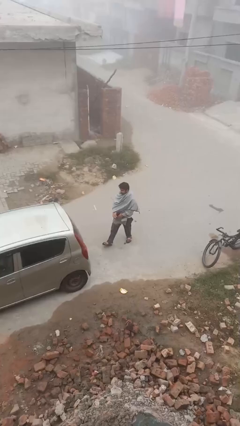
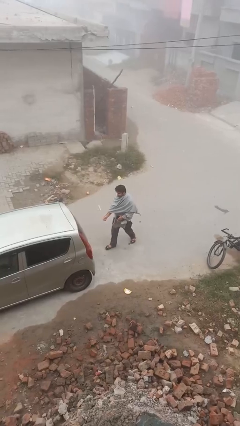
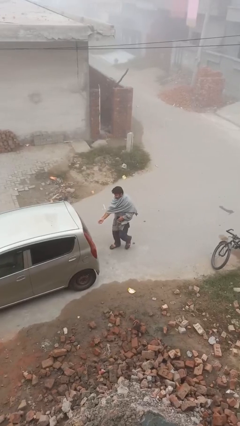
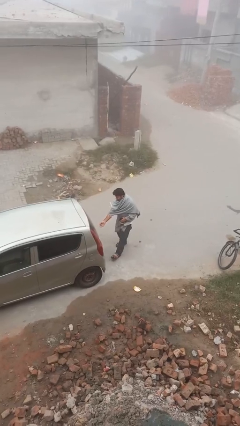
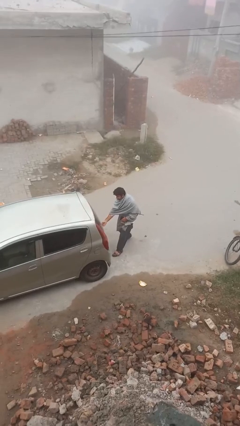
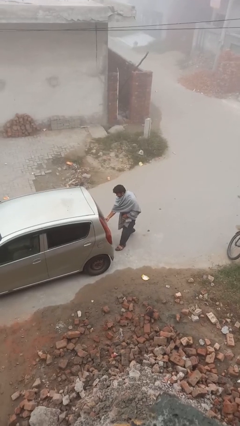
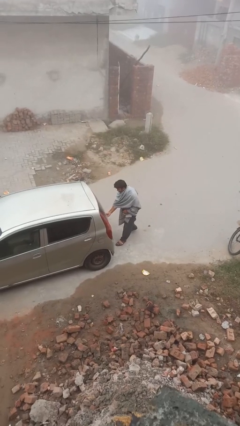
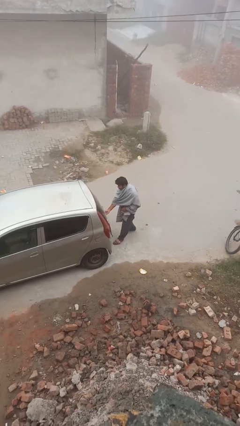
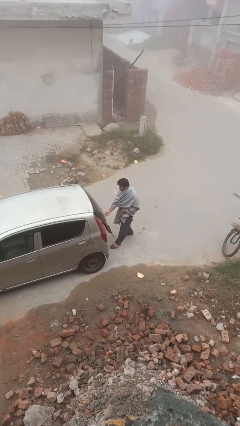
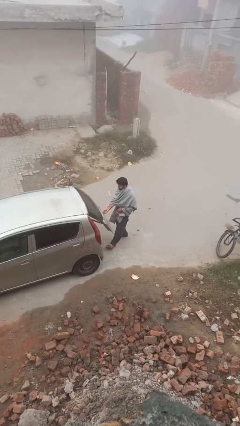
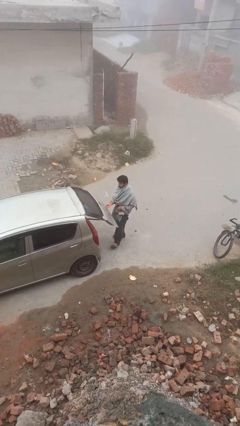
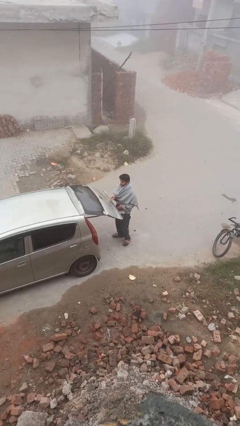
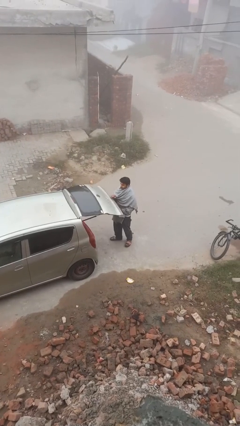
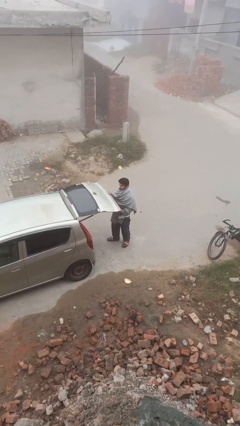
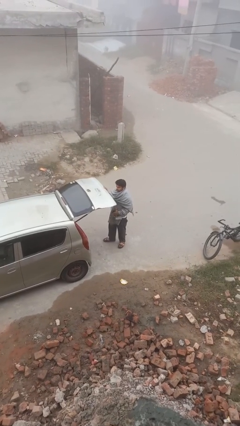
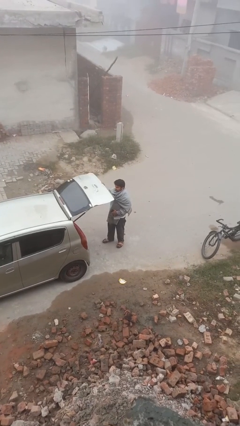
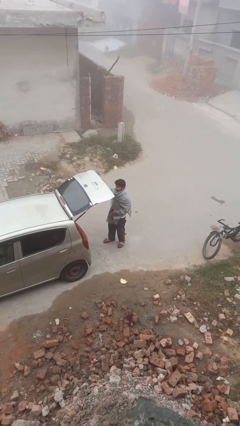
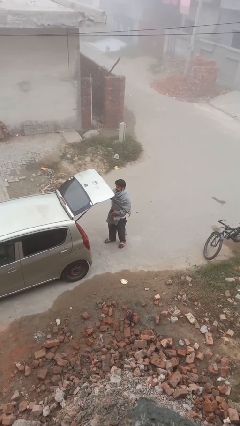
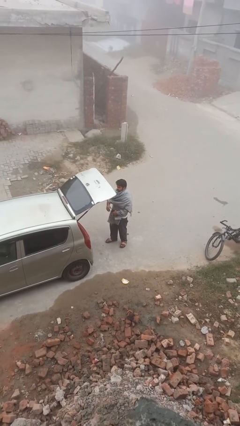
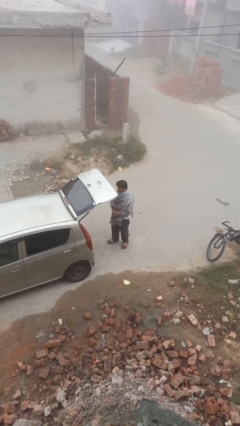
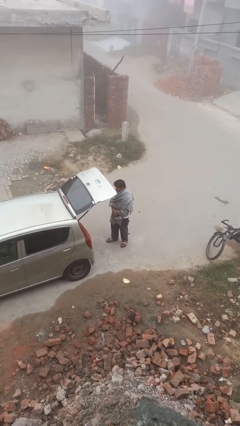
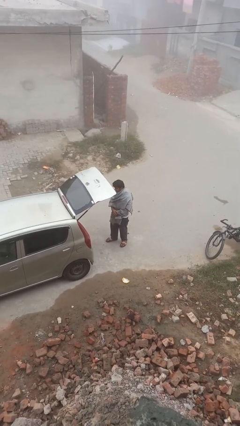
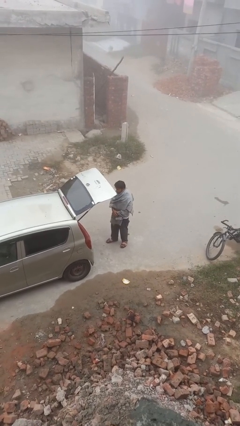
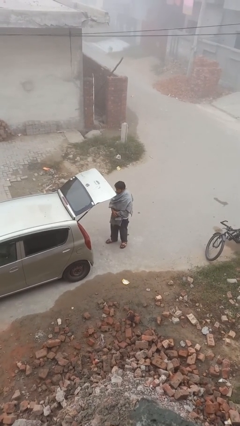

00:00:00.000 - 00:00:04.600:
person opens car trunk

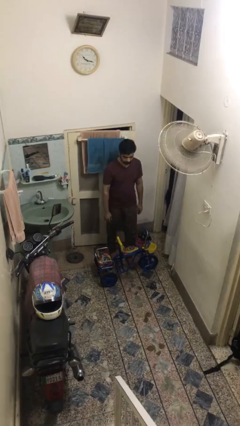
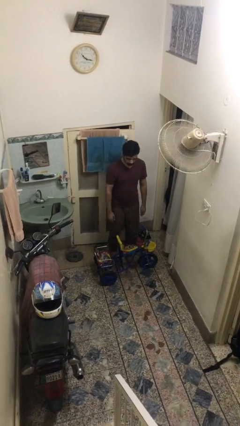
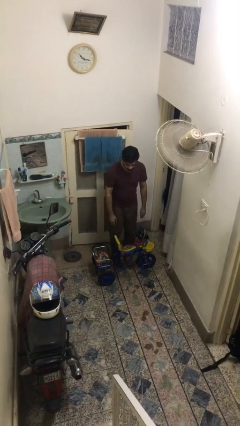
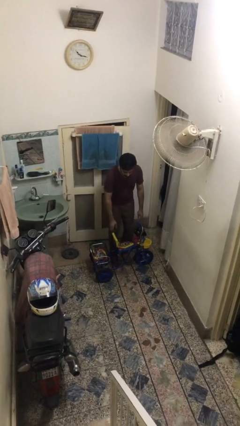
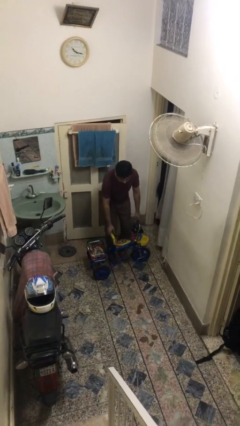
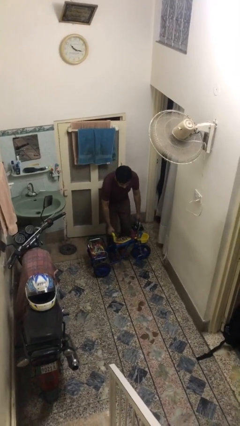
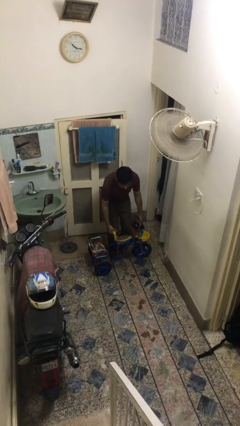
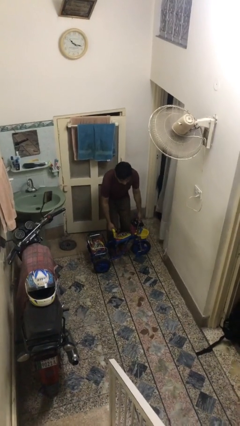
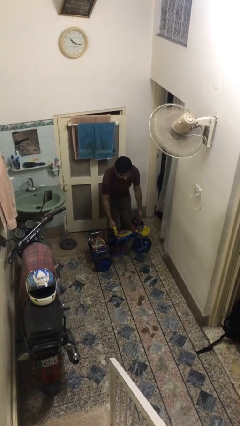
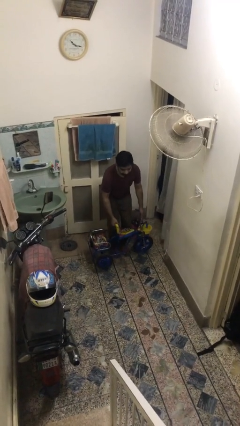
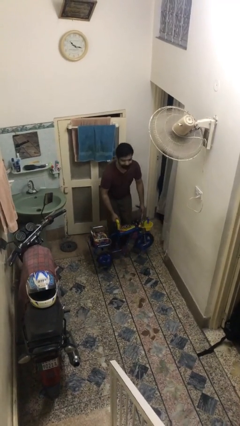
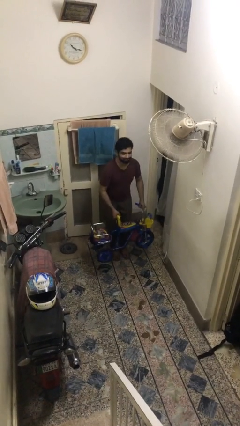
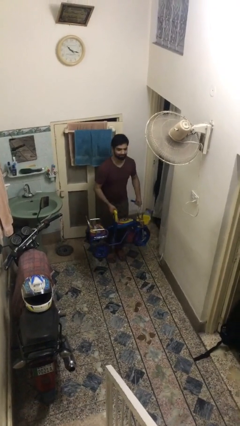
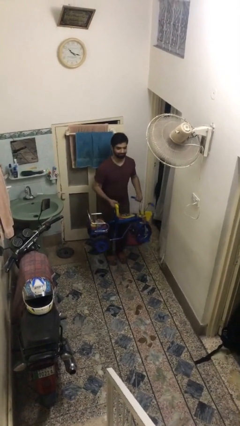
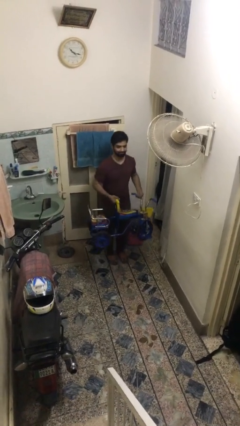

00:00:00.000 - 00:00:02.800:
person picks up object from floor

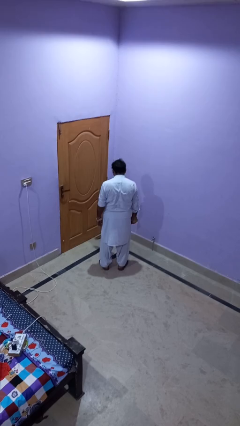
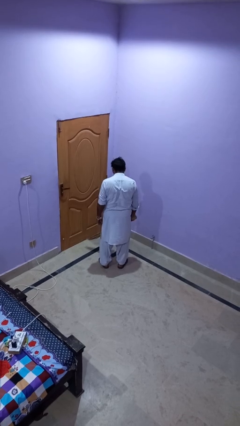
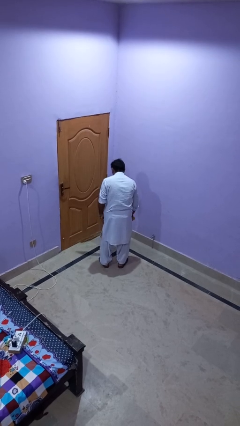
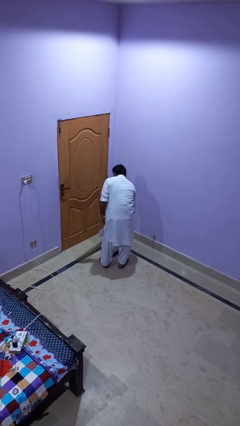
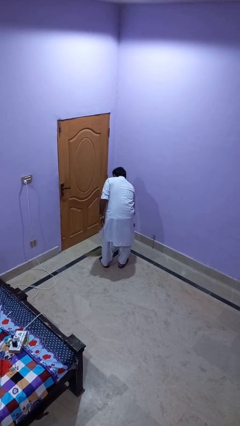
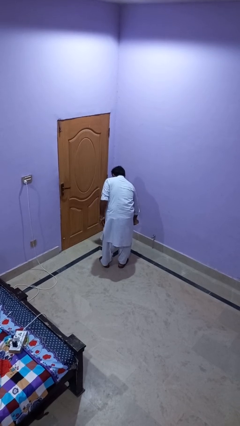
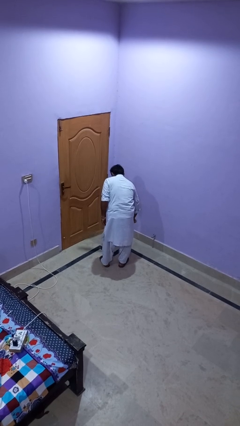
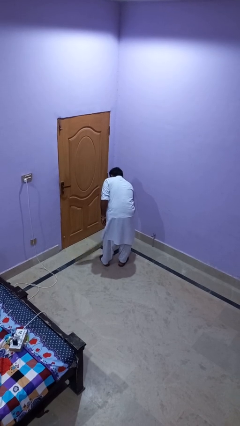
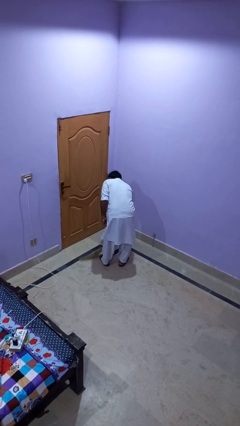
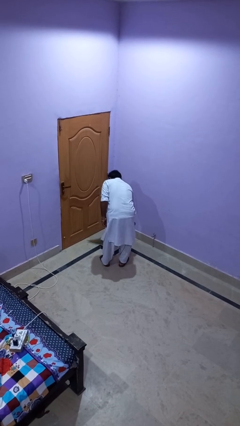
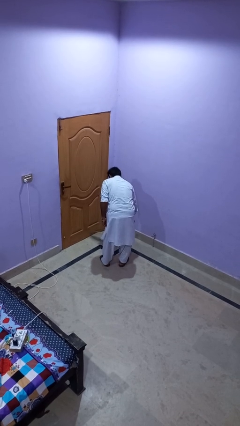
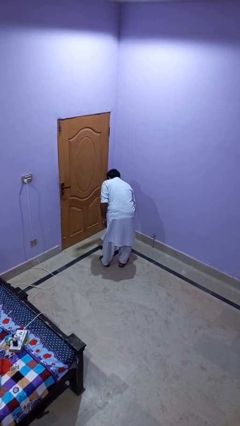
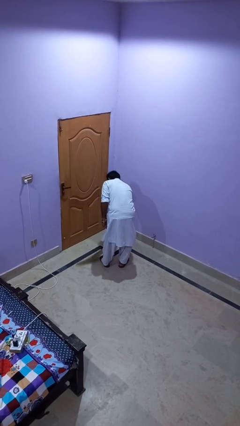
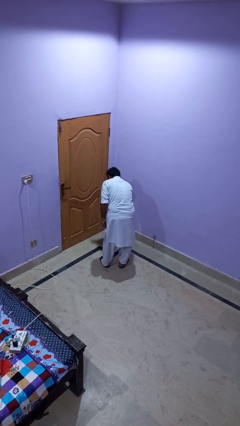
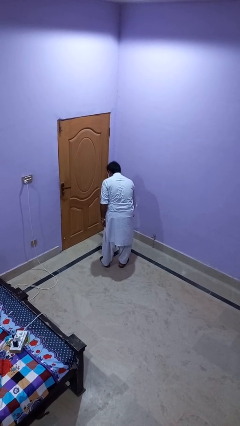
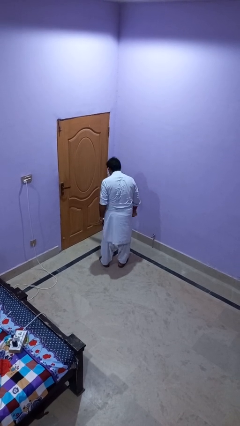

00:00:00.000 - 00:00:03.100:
person sweeps floor

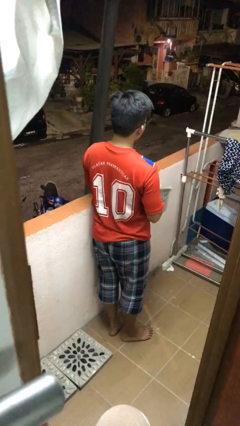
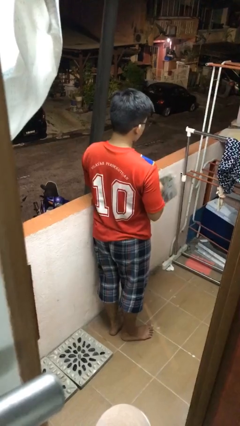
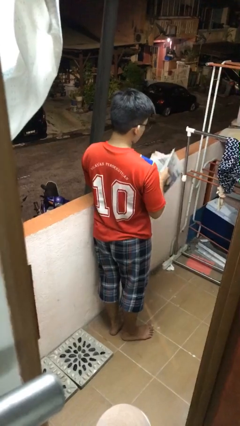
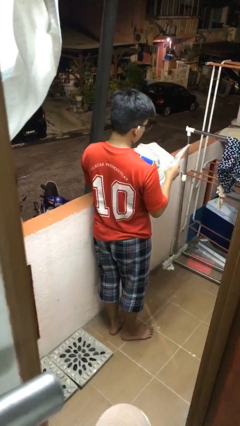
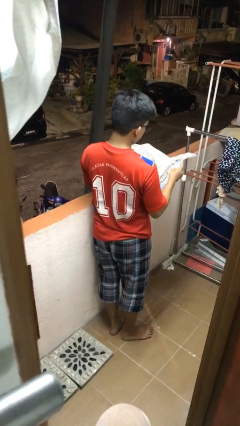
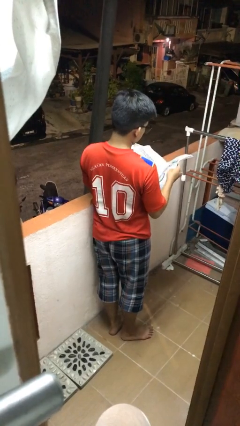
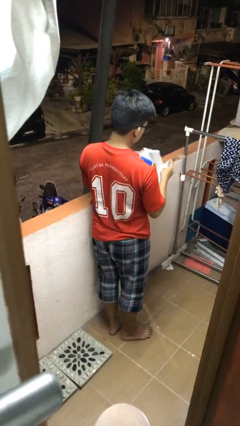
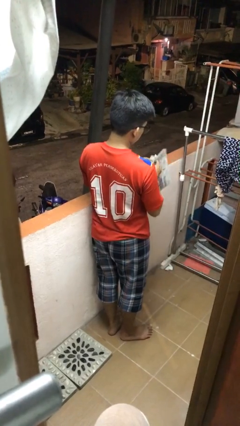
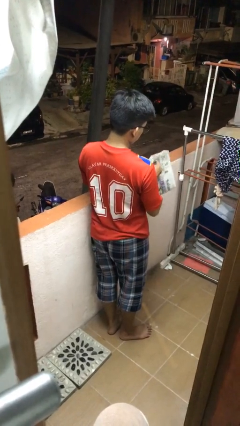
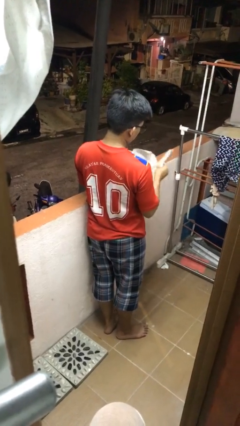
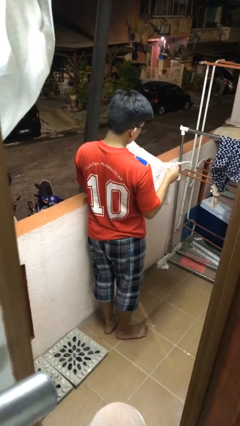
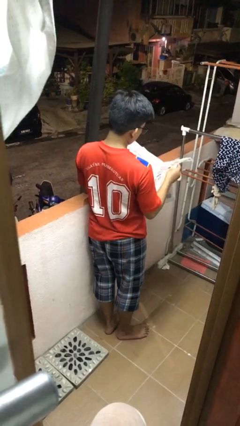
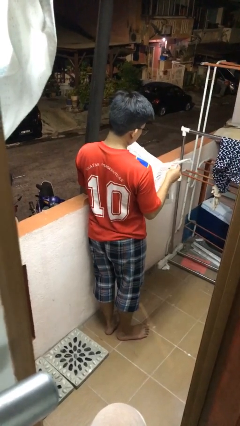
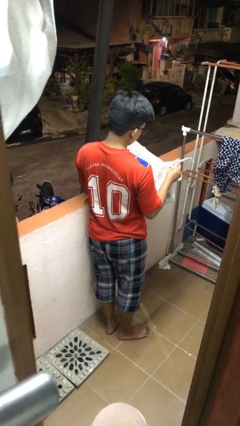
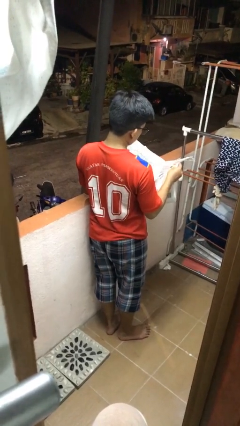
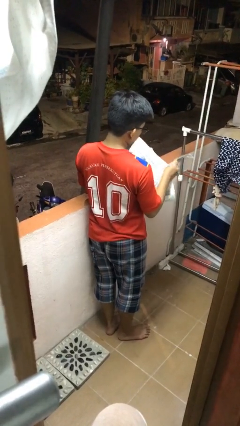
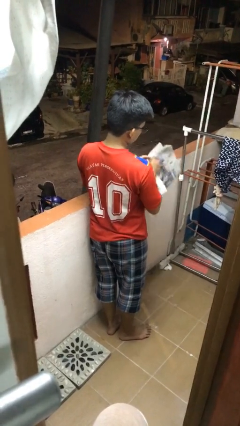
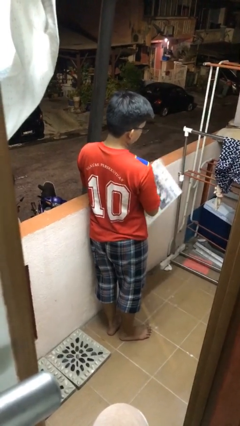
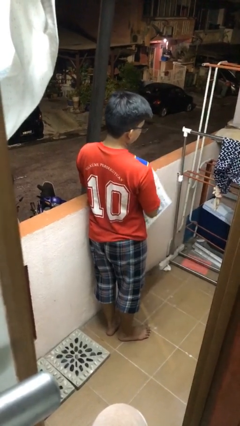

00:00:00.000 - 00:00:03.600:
person reads newspaper

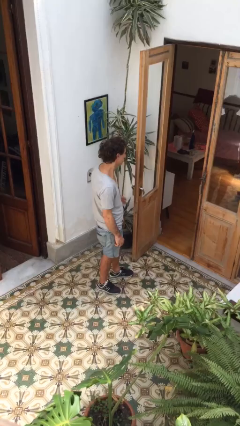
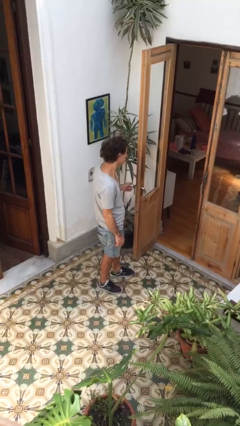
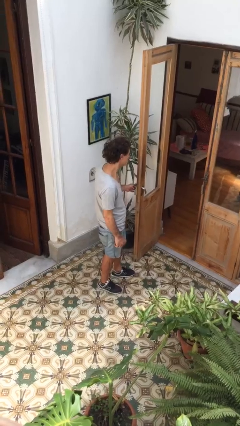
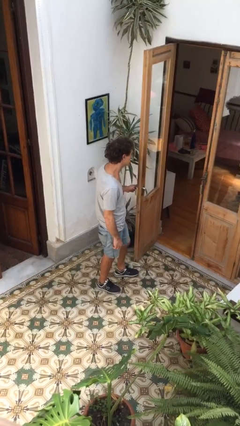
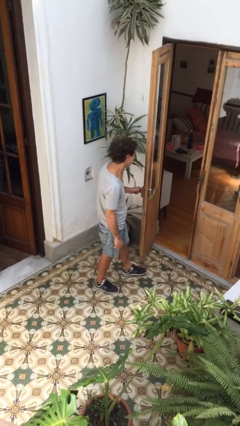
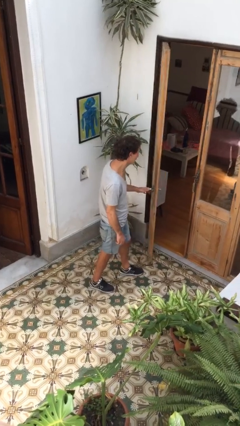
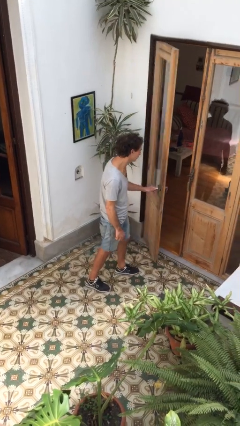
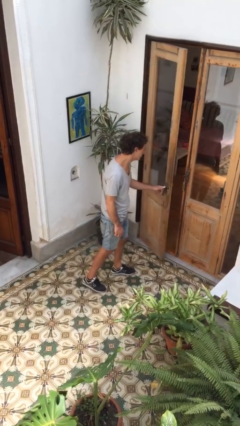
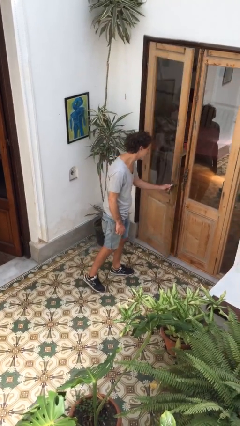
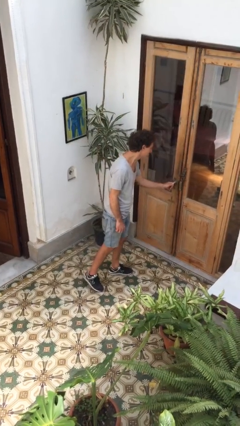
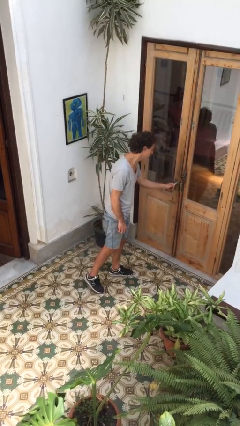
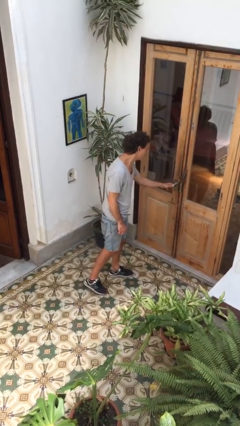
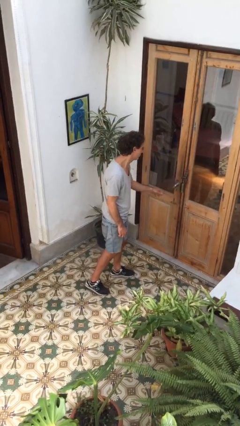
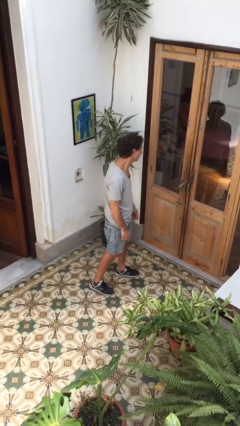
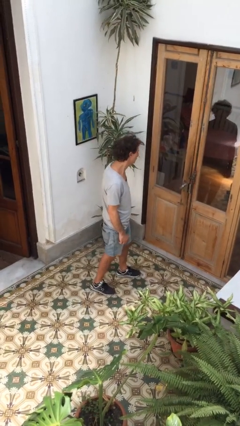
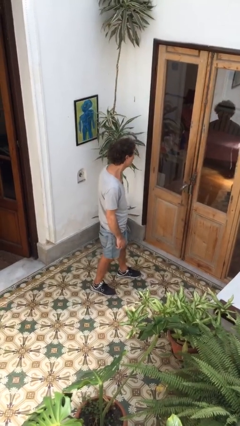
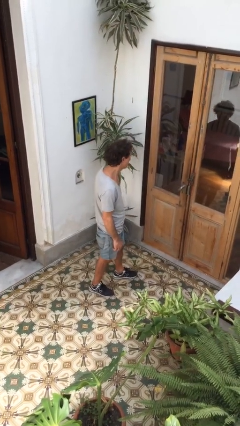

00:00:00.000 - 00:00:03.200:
person closes facility door

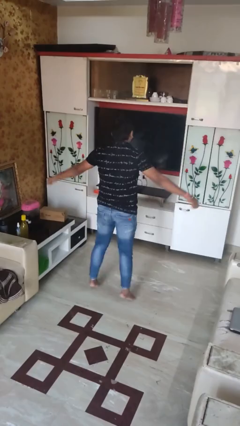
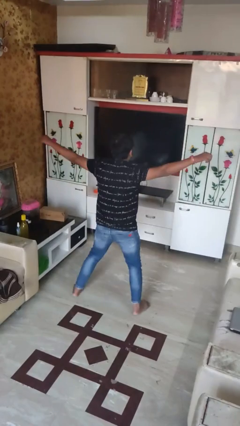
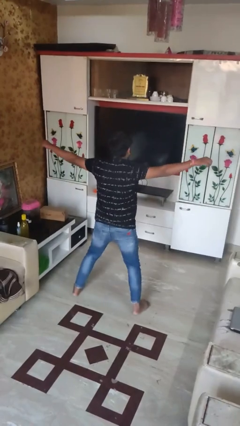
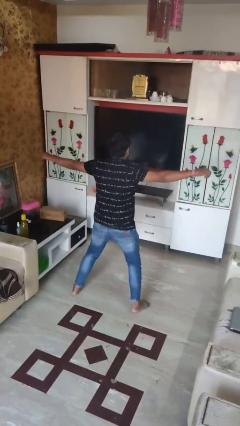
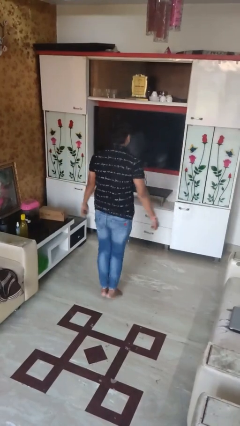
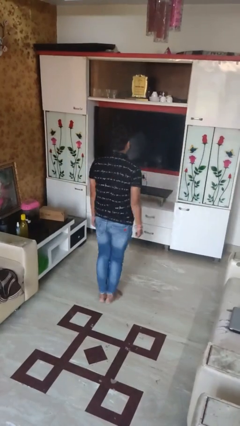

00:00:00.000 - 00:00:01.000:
person exercises with jumping jacks
